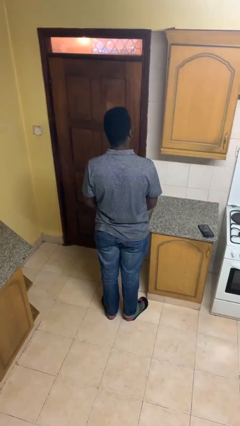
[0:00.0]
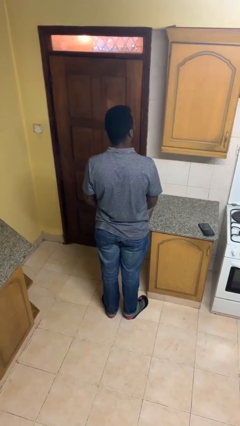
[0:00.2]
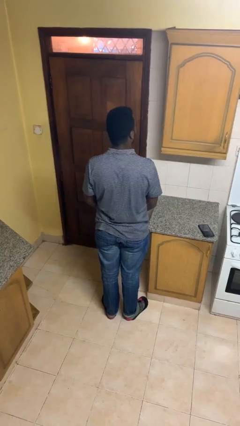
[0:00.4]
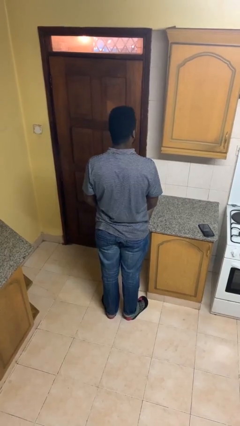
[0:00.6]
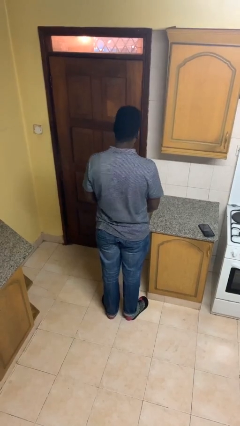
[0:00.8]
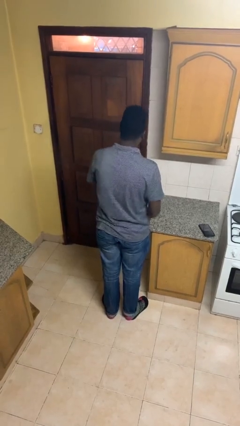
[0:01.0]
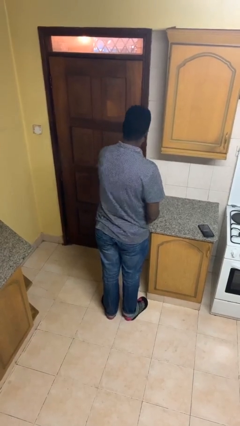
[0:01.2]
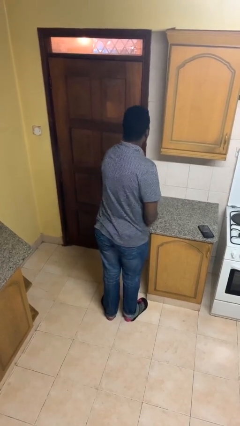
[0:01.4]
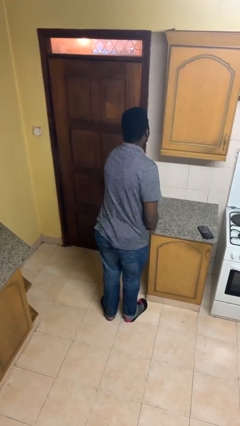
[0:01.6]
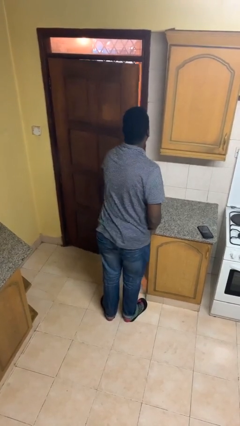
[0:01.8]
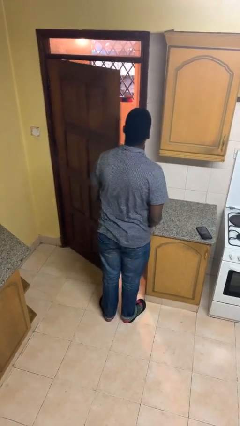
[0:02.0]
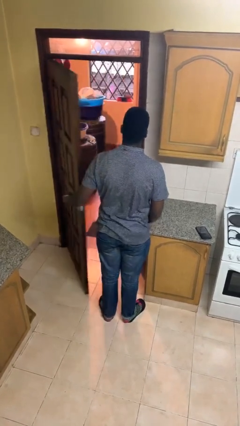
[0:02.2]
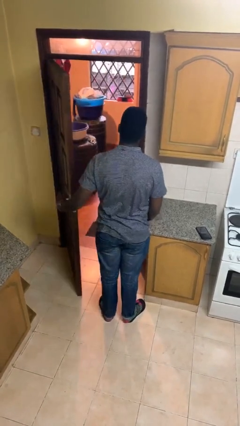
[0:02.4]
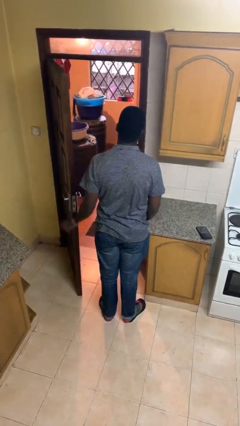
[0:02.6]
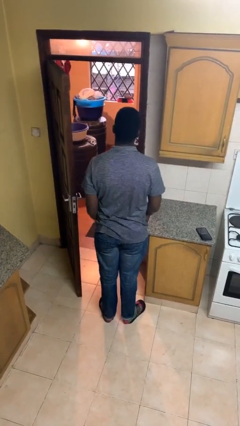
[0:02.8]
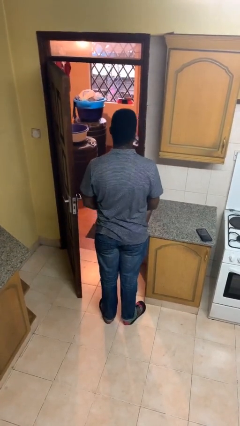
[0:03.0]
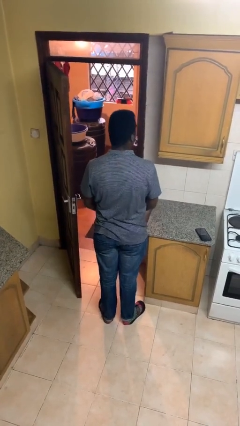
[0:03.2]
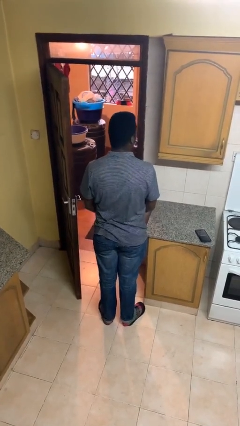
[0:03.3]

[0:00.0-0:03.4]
person opens facility door

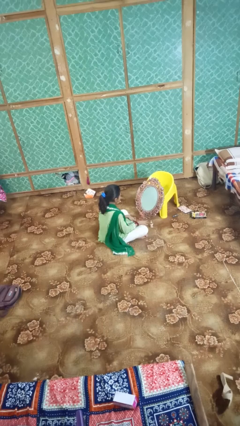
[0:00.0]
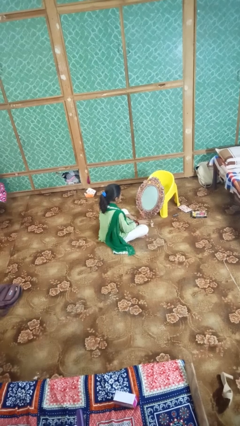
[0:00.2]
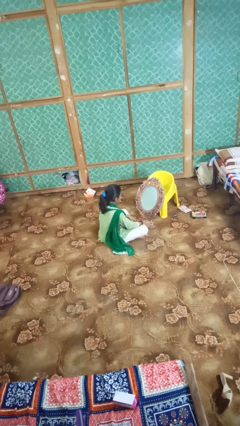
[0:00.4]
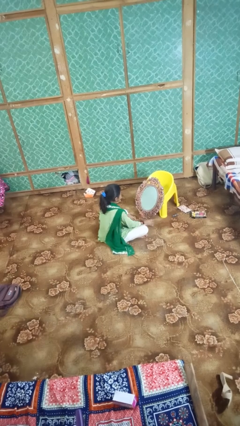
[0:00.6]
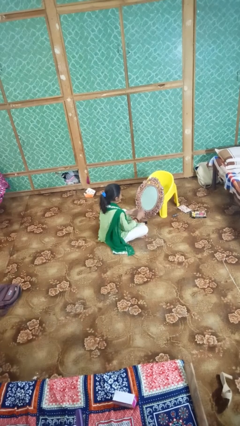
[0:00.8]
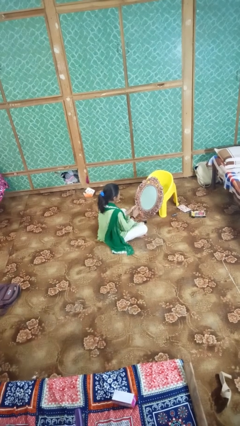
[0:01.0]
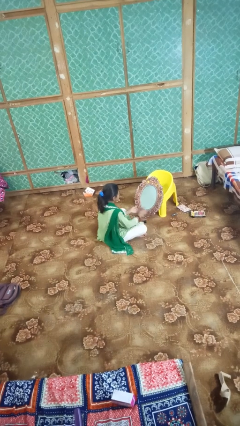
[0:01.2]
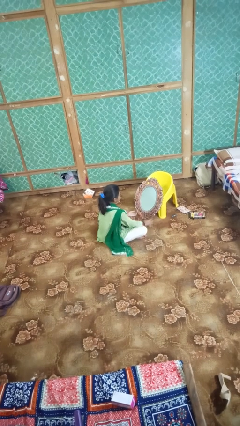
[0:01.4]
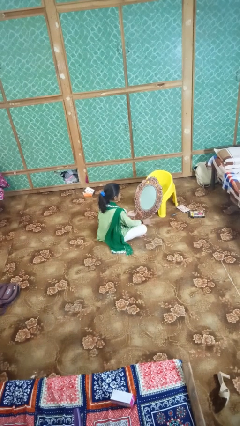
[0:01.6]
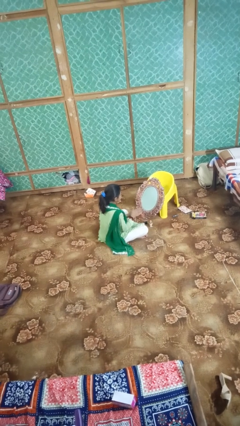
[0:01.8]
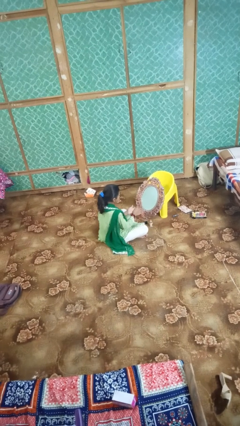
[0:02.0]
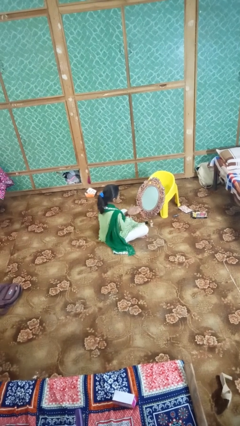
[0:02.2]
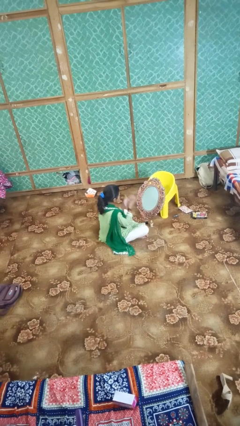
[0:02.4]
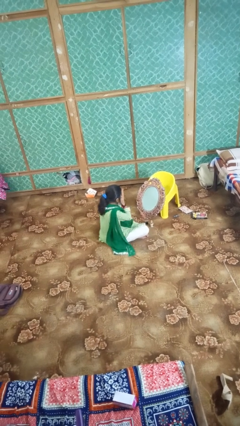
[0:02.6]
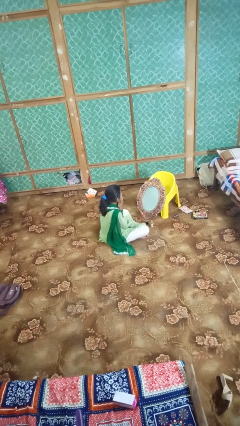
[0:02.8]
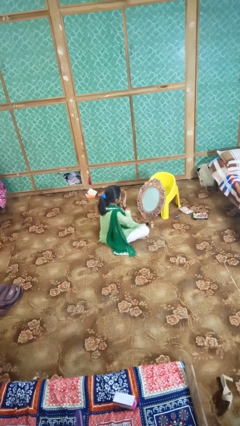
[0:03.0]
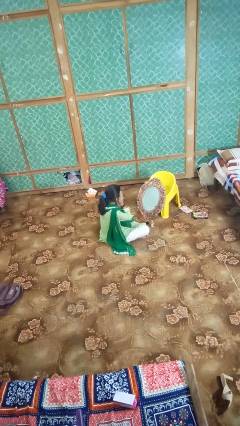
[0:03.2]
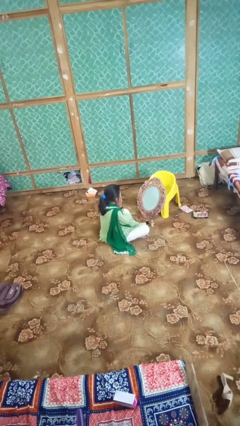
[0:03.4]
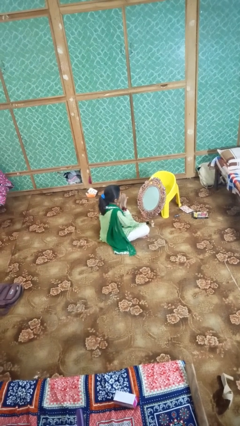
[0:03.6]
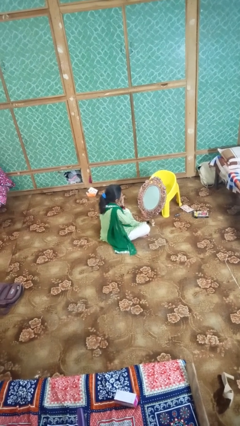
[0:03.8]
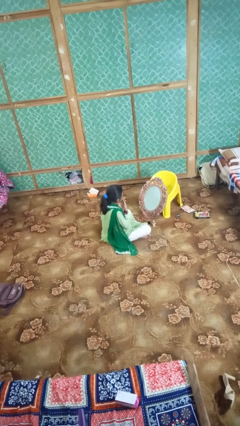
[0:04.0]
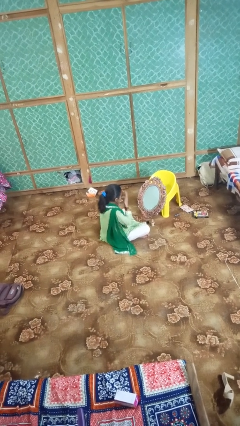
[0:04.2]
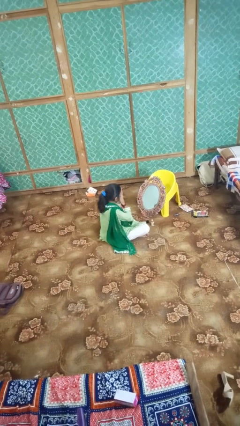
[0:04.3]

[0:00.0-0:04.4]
person applies foundation makeup

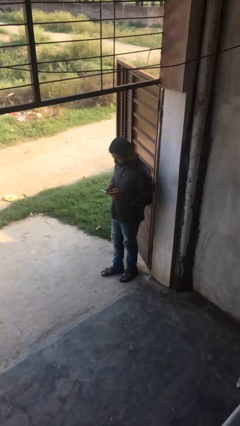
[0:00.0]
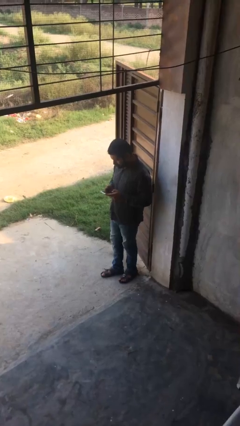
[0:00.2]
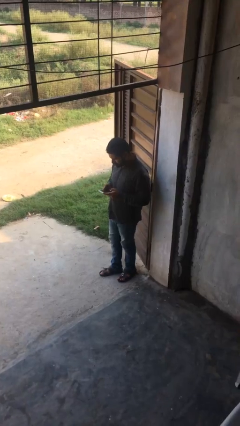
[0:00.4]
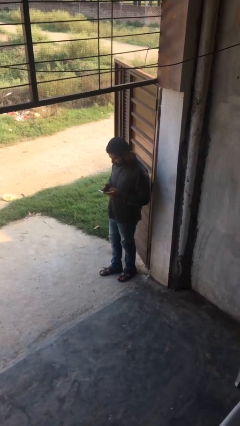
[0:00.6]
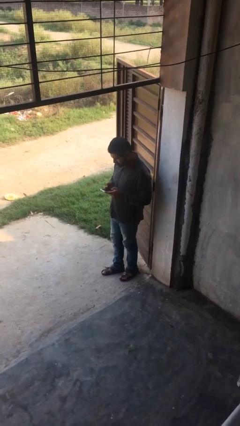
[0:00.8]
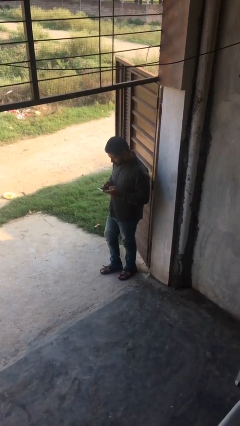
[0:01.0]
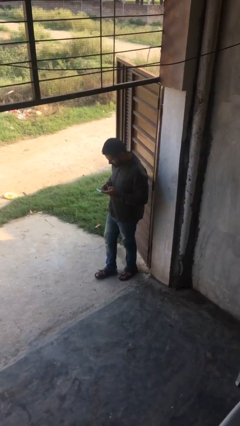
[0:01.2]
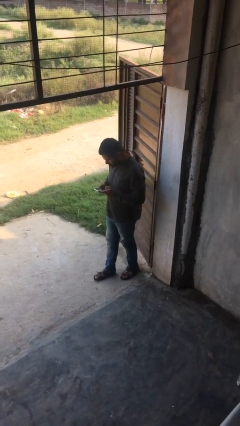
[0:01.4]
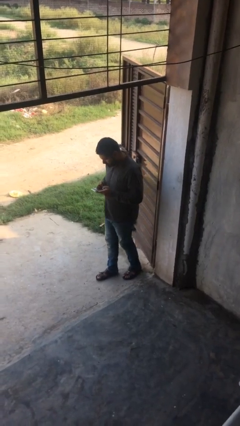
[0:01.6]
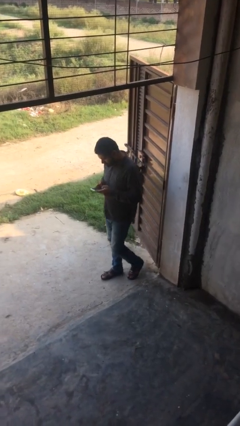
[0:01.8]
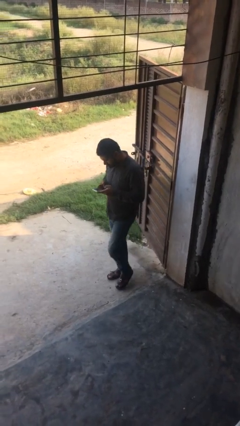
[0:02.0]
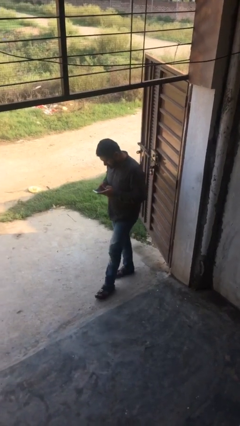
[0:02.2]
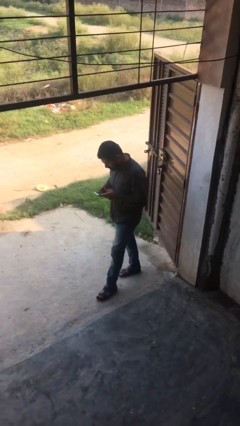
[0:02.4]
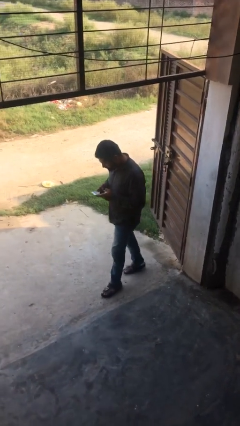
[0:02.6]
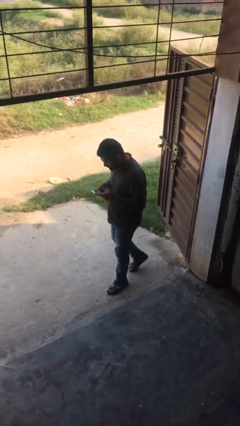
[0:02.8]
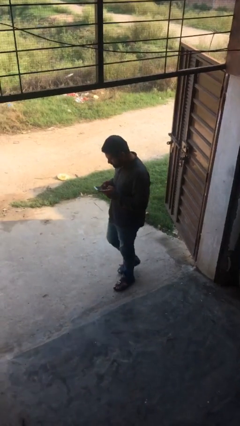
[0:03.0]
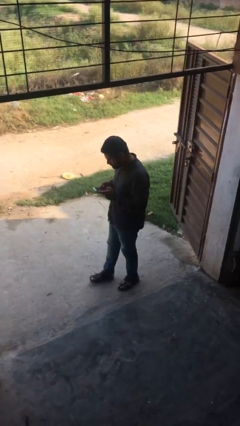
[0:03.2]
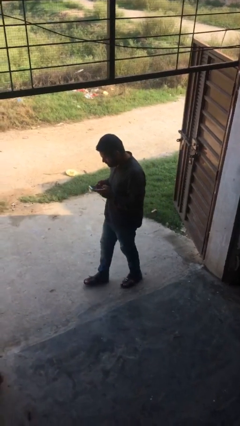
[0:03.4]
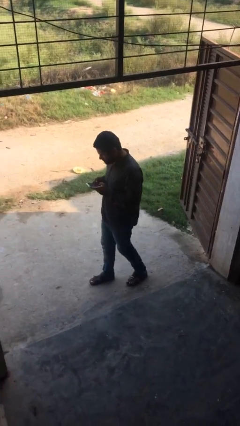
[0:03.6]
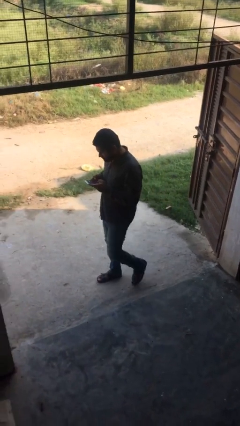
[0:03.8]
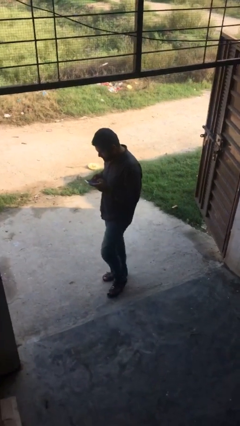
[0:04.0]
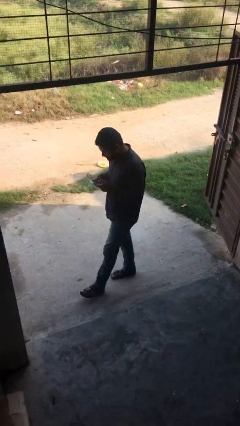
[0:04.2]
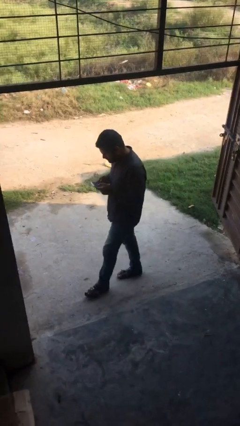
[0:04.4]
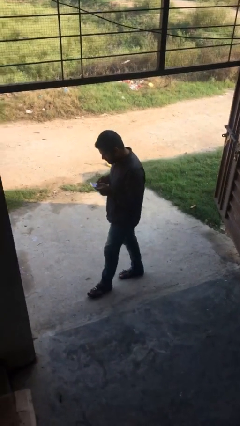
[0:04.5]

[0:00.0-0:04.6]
person texts on phone

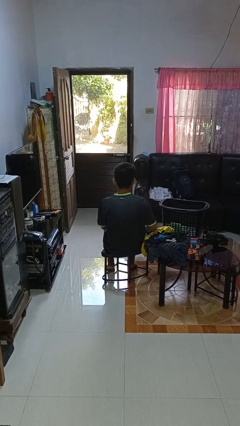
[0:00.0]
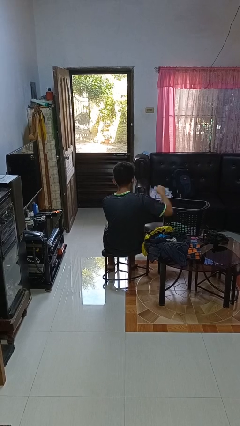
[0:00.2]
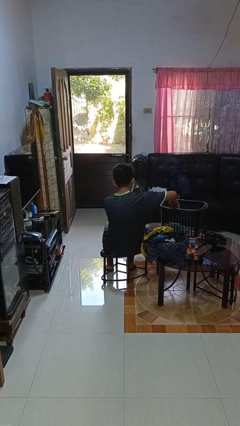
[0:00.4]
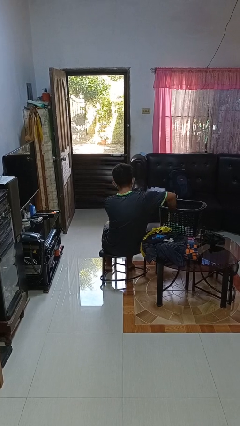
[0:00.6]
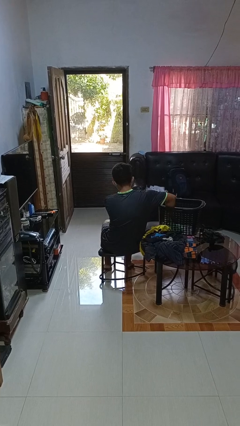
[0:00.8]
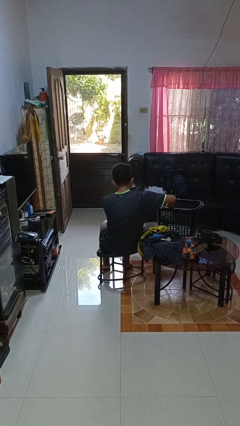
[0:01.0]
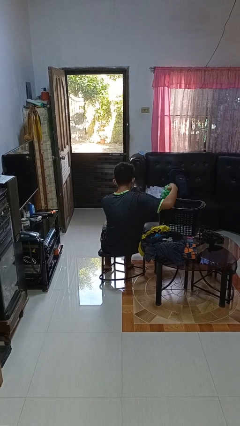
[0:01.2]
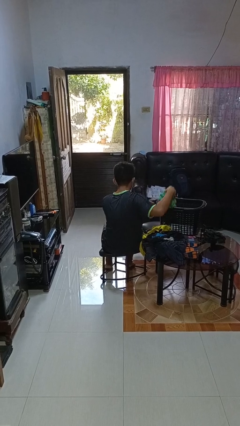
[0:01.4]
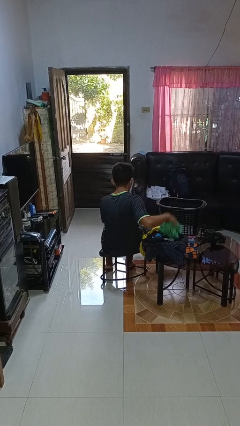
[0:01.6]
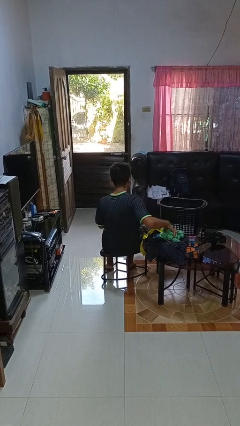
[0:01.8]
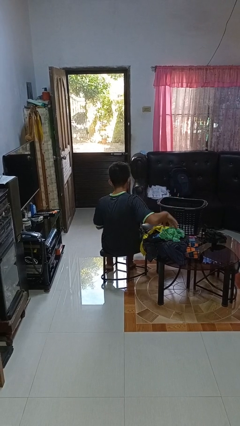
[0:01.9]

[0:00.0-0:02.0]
person takes object from basket

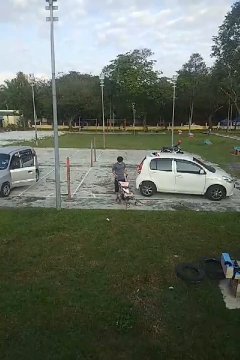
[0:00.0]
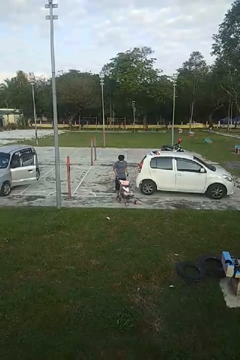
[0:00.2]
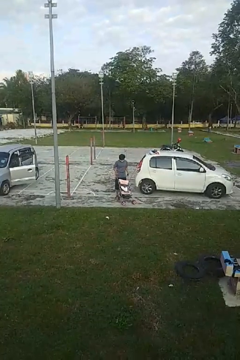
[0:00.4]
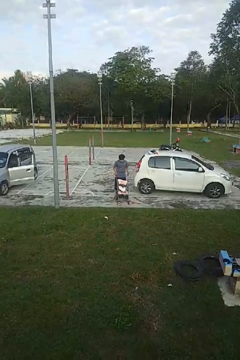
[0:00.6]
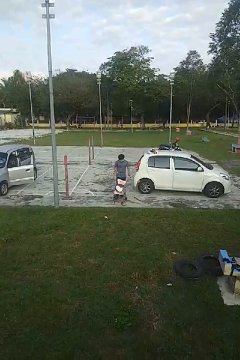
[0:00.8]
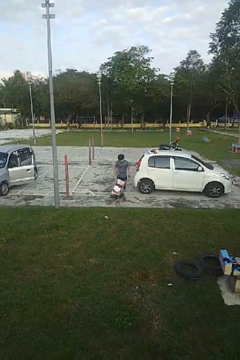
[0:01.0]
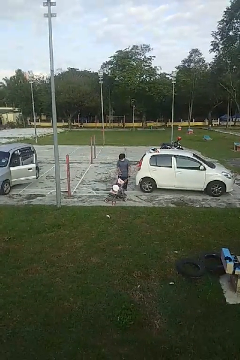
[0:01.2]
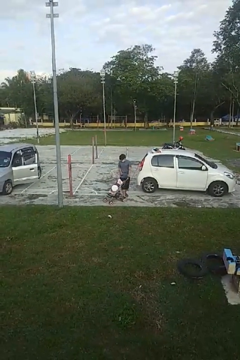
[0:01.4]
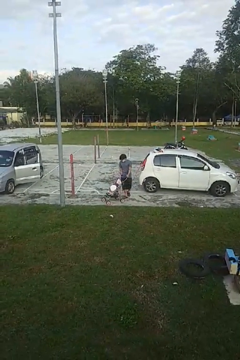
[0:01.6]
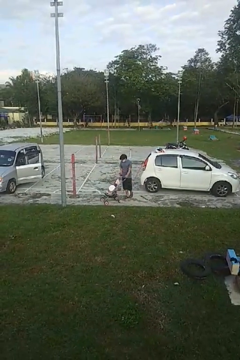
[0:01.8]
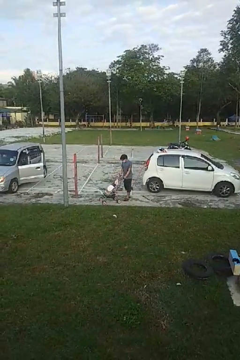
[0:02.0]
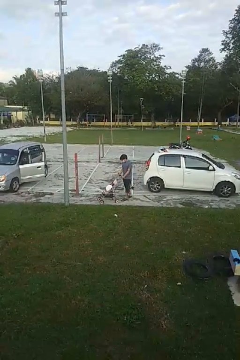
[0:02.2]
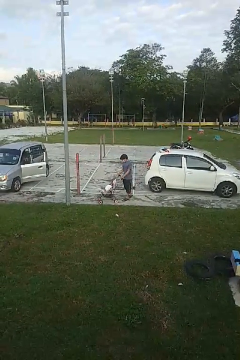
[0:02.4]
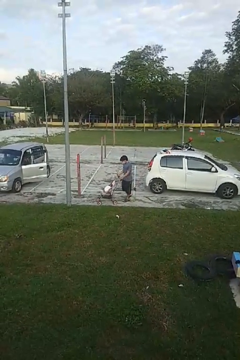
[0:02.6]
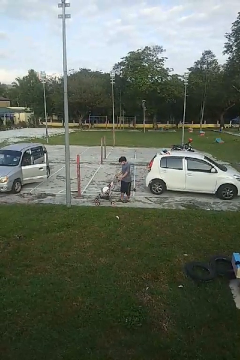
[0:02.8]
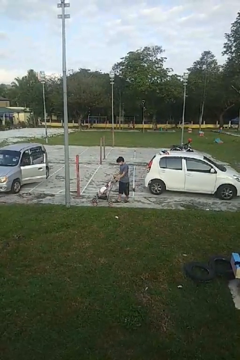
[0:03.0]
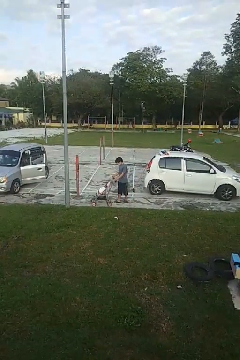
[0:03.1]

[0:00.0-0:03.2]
person pushes wheeled cart

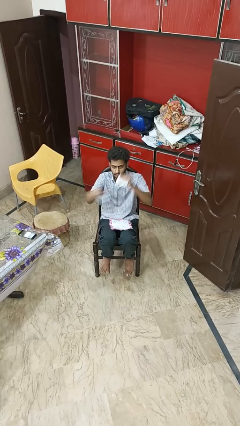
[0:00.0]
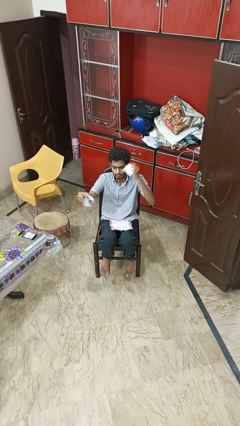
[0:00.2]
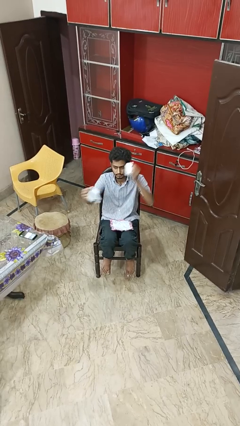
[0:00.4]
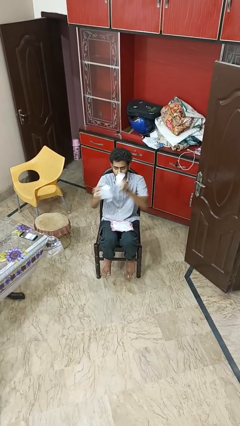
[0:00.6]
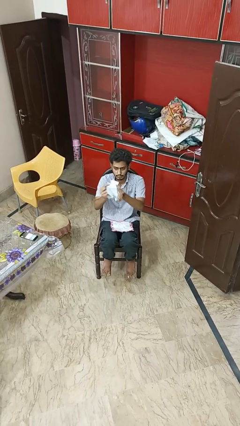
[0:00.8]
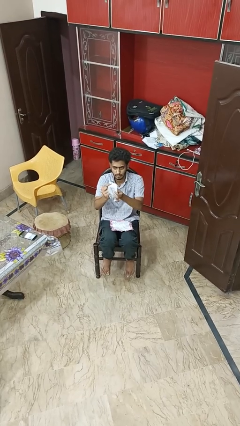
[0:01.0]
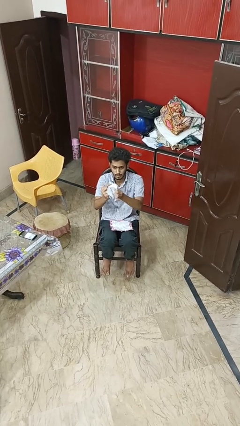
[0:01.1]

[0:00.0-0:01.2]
person tears paper
